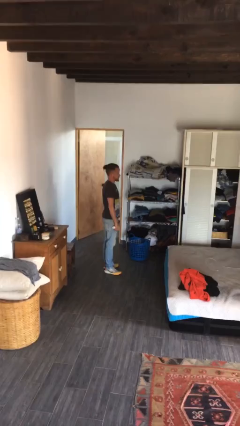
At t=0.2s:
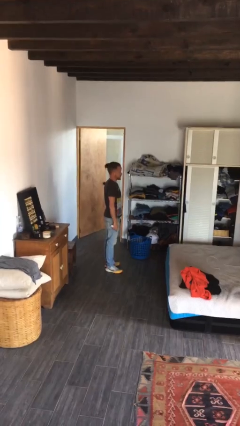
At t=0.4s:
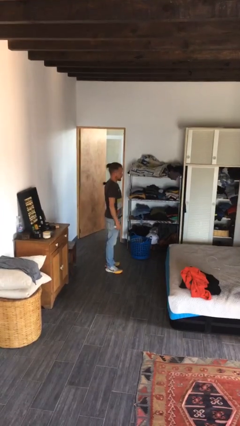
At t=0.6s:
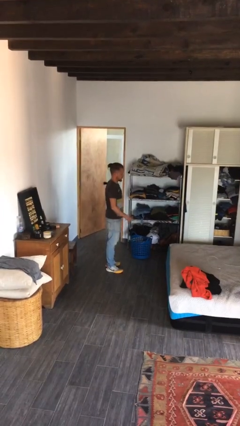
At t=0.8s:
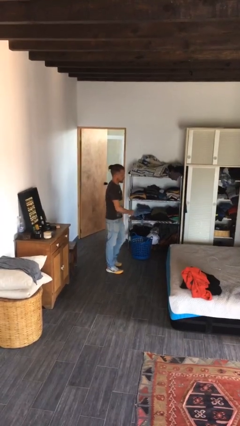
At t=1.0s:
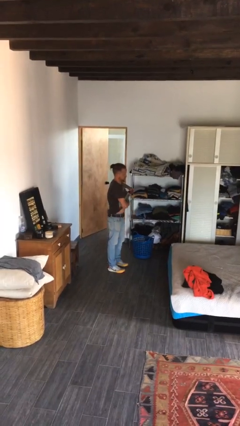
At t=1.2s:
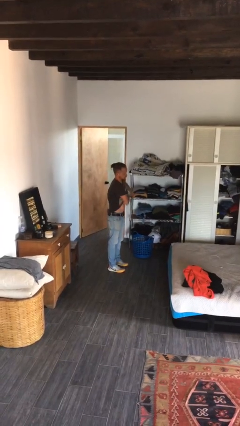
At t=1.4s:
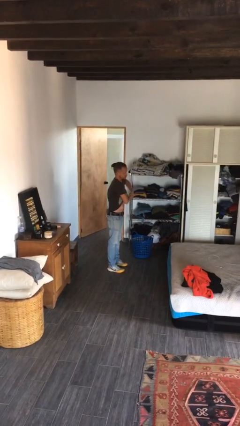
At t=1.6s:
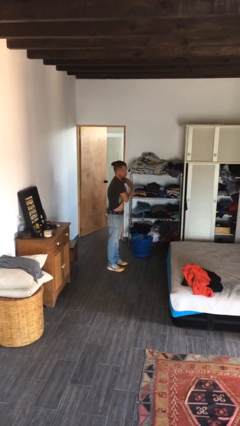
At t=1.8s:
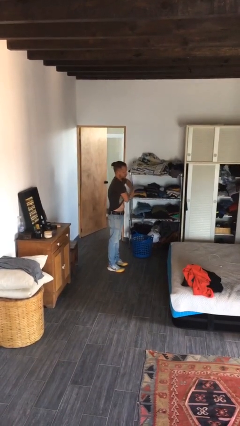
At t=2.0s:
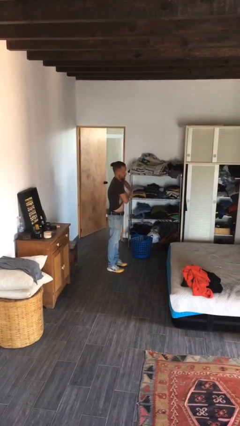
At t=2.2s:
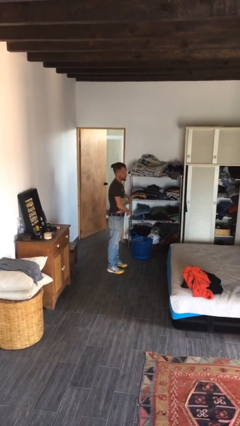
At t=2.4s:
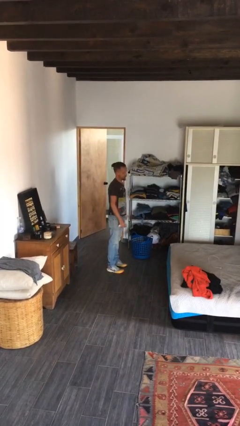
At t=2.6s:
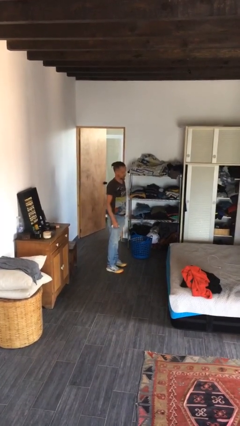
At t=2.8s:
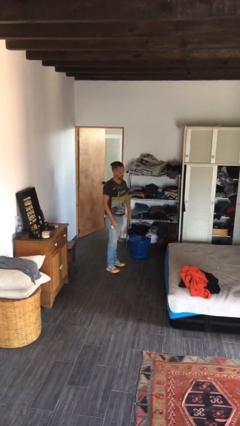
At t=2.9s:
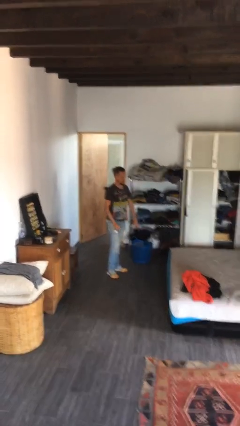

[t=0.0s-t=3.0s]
person applies deodorant

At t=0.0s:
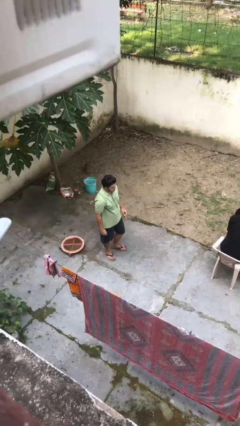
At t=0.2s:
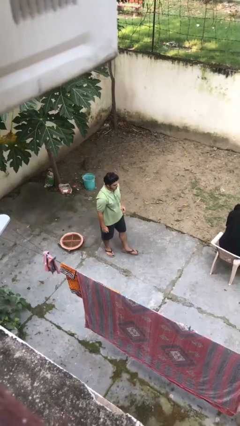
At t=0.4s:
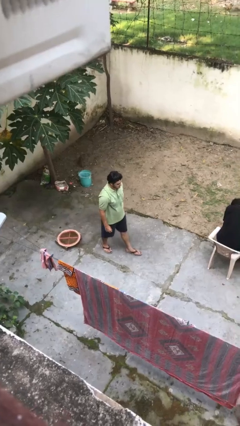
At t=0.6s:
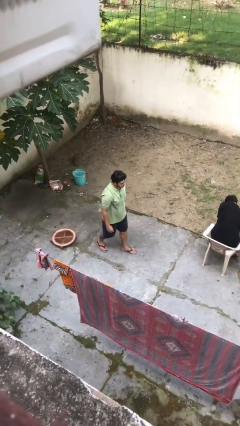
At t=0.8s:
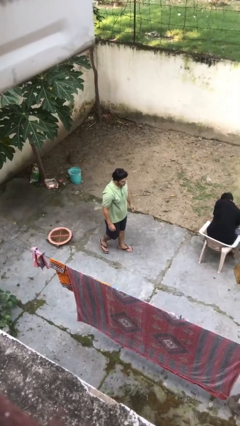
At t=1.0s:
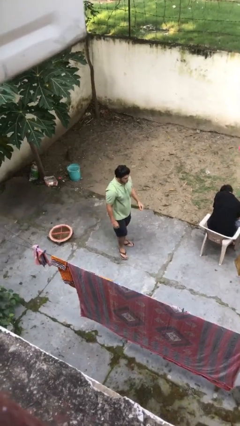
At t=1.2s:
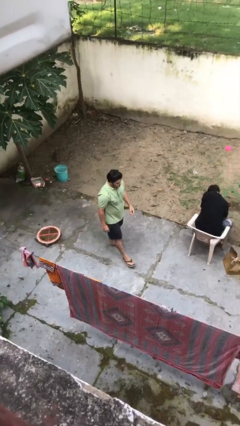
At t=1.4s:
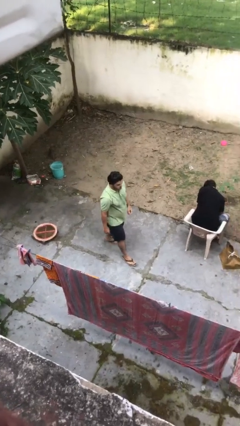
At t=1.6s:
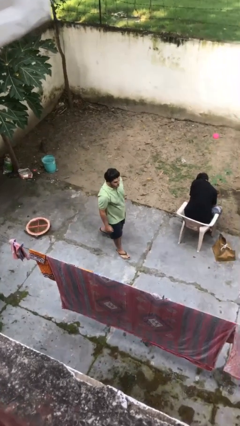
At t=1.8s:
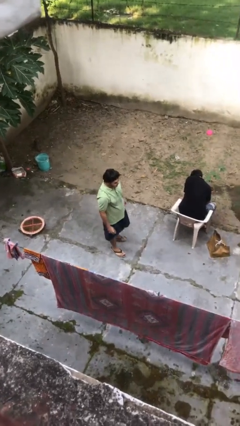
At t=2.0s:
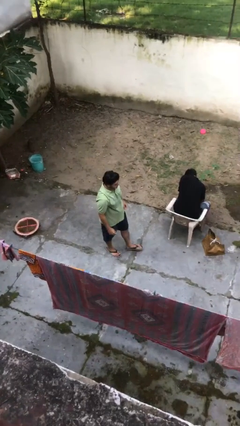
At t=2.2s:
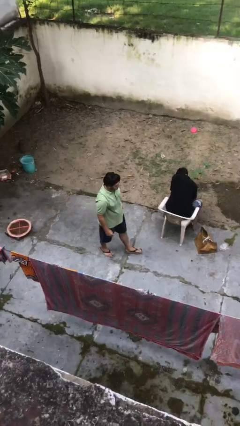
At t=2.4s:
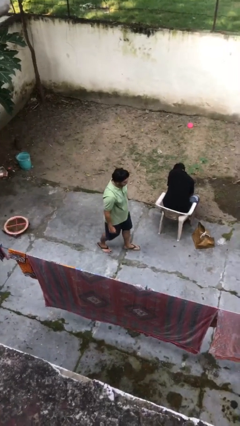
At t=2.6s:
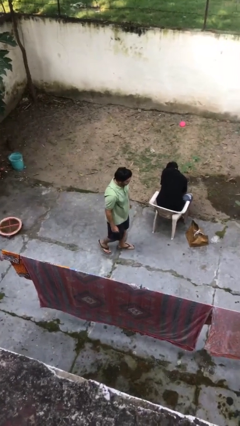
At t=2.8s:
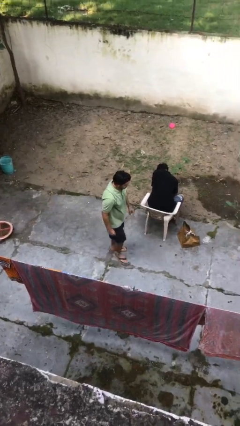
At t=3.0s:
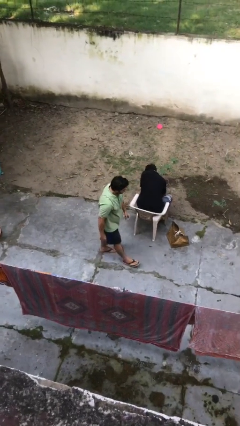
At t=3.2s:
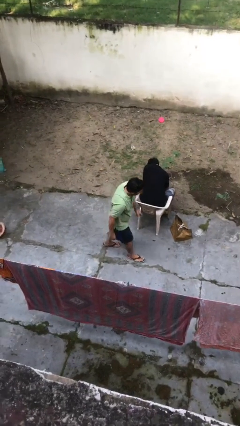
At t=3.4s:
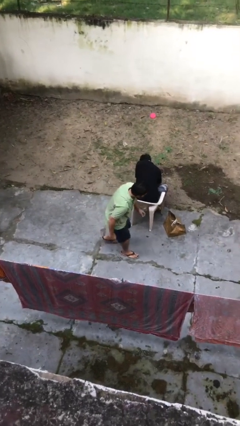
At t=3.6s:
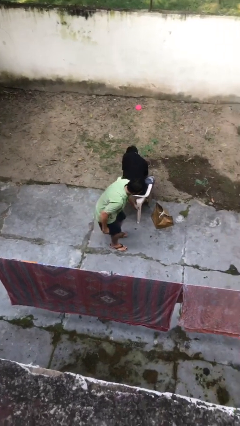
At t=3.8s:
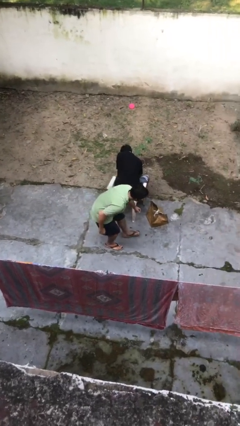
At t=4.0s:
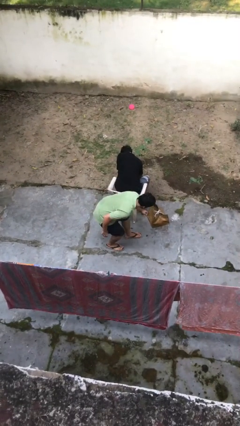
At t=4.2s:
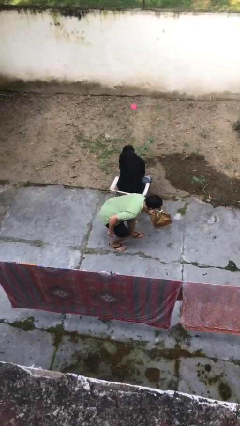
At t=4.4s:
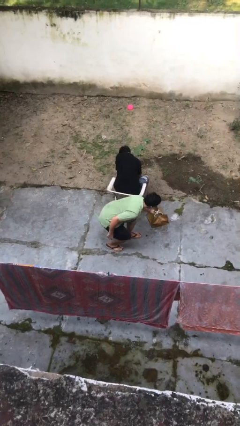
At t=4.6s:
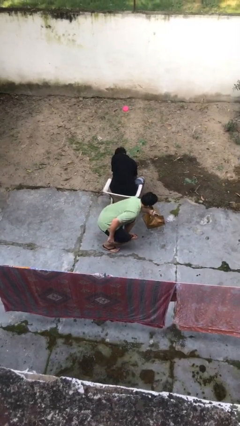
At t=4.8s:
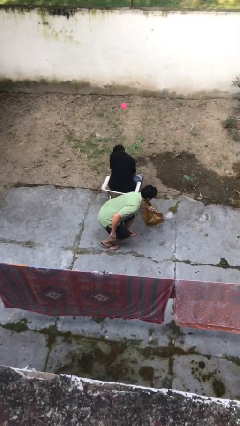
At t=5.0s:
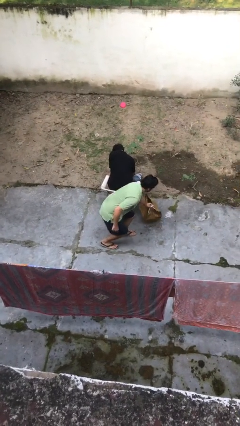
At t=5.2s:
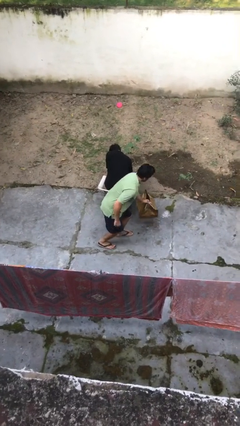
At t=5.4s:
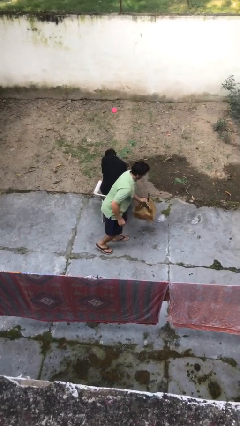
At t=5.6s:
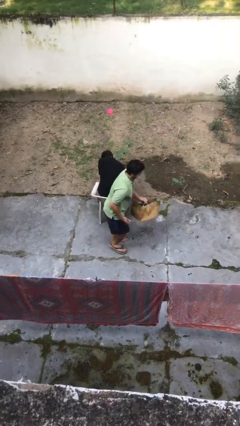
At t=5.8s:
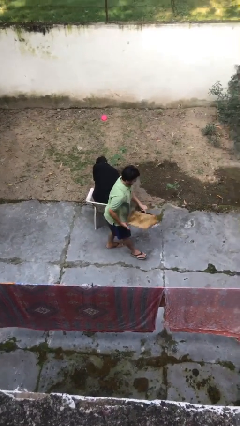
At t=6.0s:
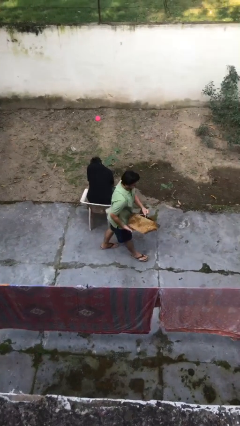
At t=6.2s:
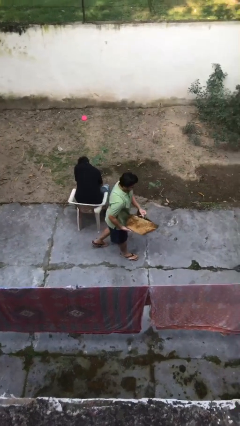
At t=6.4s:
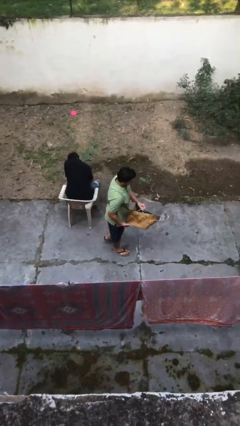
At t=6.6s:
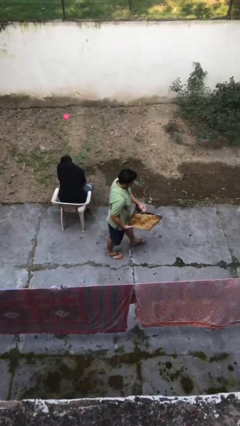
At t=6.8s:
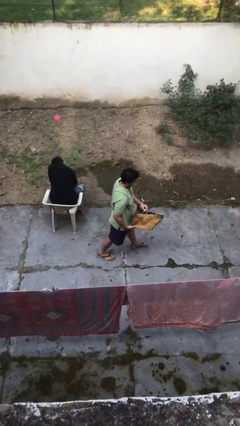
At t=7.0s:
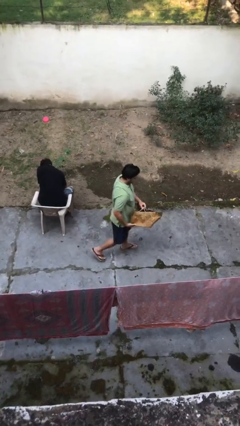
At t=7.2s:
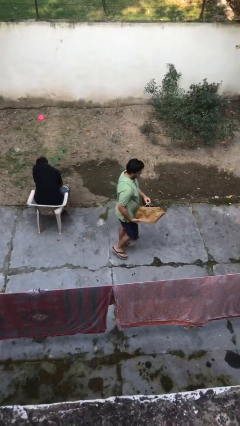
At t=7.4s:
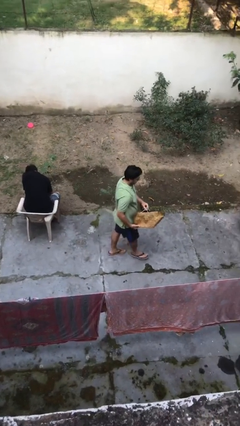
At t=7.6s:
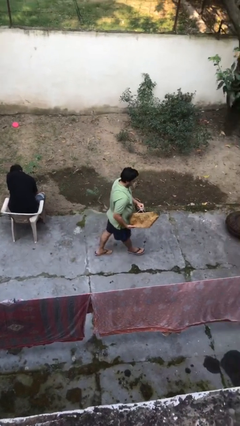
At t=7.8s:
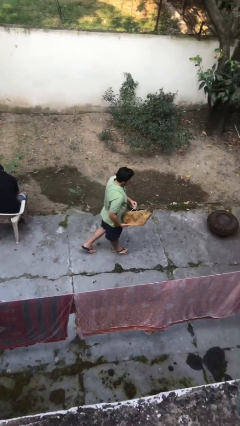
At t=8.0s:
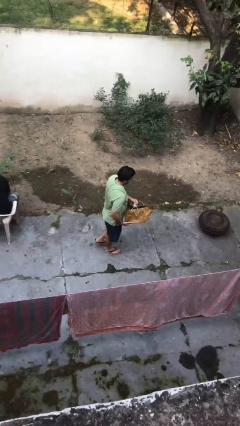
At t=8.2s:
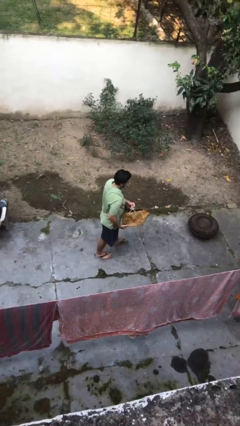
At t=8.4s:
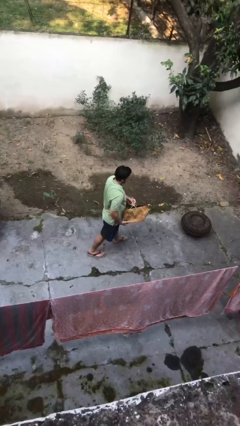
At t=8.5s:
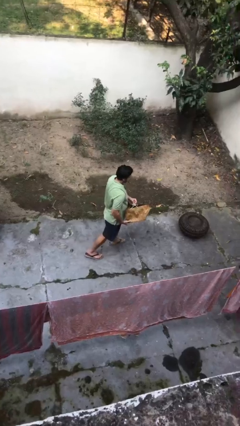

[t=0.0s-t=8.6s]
person steals object from person

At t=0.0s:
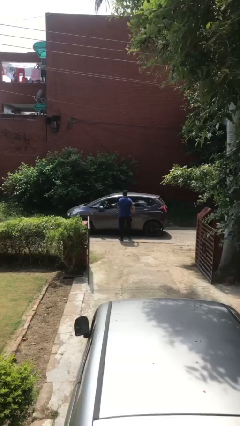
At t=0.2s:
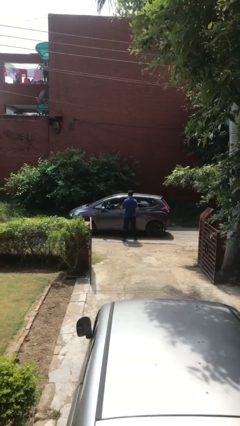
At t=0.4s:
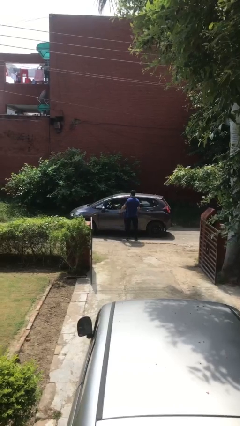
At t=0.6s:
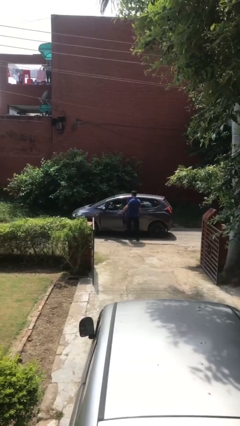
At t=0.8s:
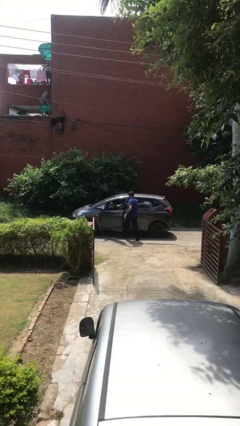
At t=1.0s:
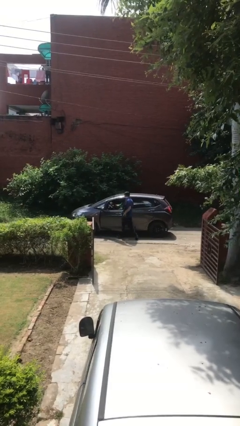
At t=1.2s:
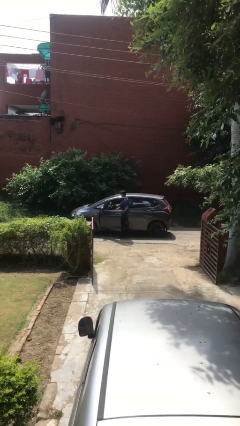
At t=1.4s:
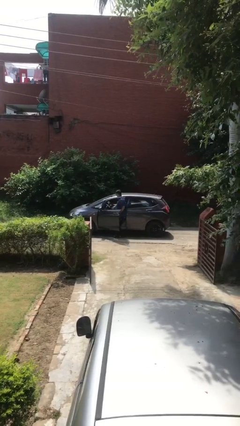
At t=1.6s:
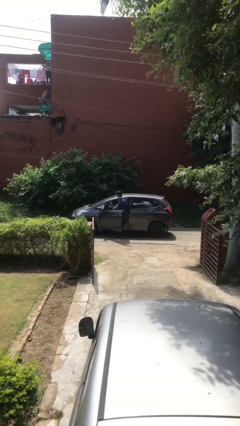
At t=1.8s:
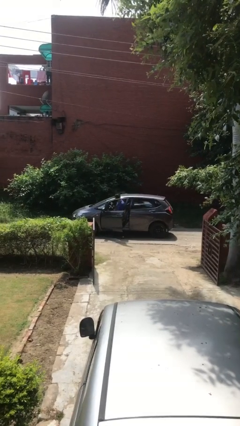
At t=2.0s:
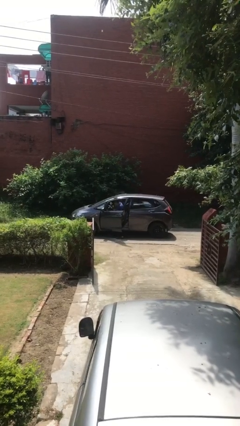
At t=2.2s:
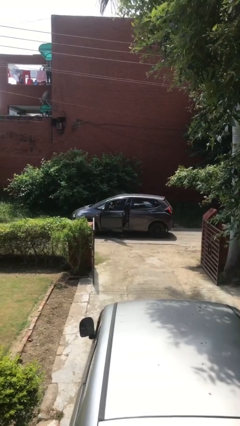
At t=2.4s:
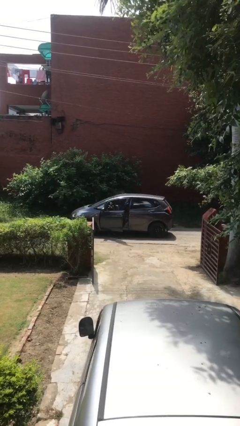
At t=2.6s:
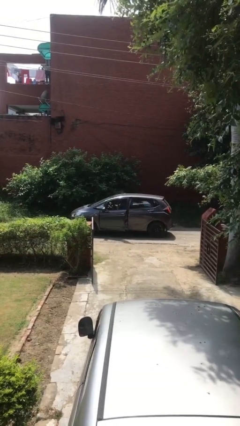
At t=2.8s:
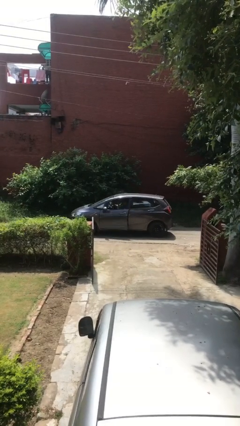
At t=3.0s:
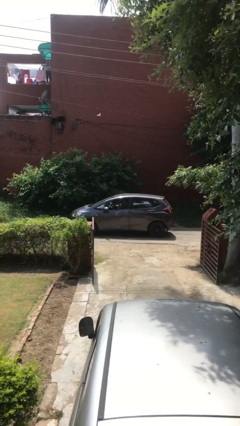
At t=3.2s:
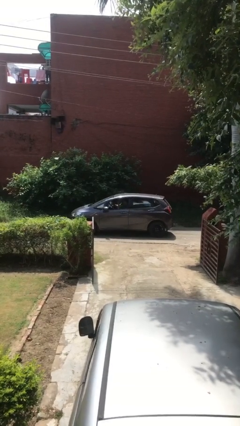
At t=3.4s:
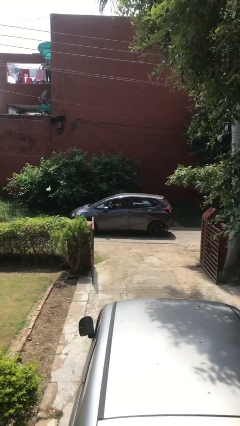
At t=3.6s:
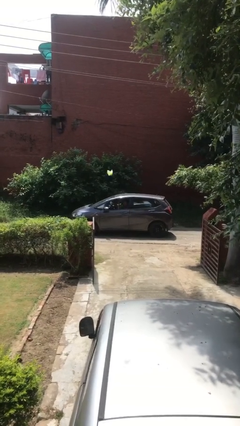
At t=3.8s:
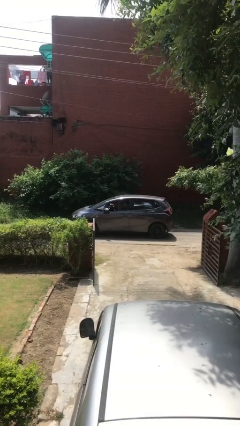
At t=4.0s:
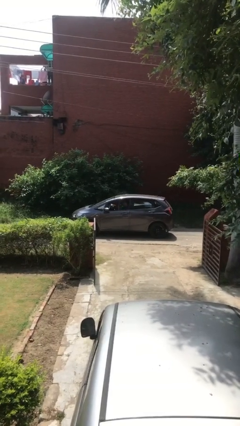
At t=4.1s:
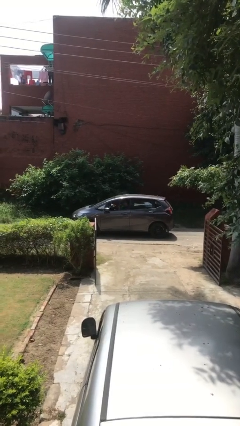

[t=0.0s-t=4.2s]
car picks up person

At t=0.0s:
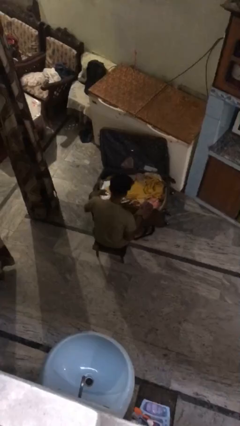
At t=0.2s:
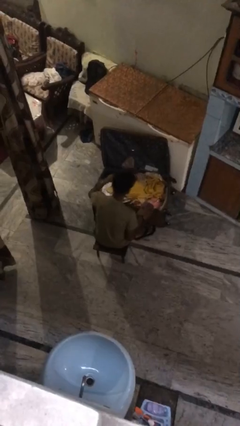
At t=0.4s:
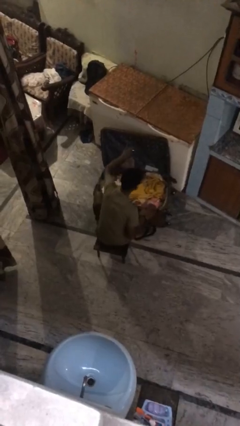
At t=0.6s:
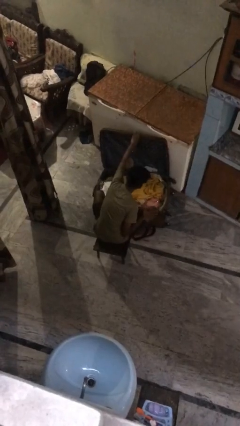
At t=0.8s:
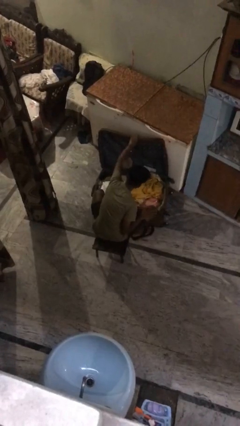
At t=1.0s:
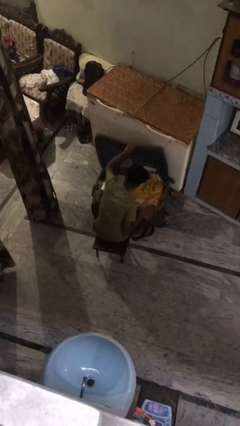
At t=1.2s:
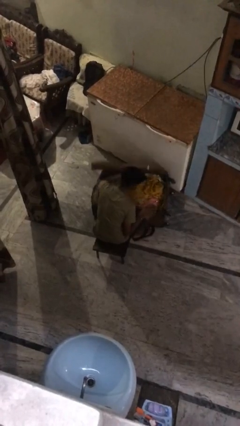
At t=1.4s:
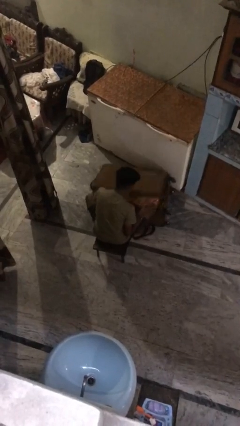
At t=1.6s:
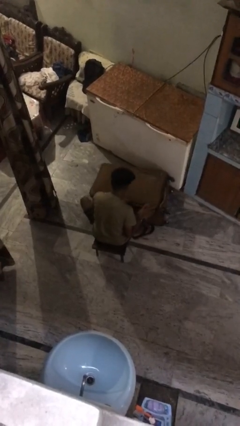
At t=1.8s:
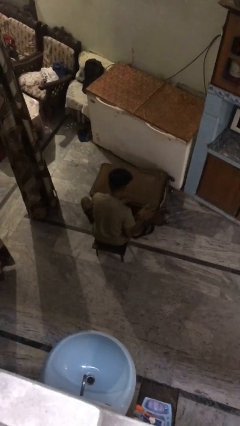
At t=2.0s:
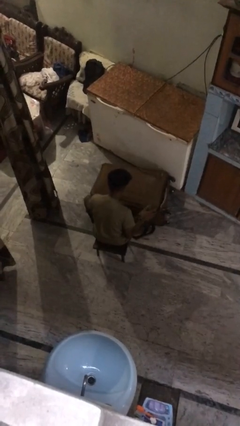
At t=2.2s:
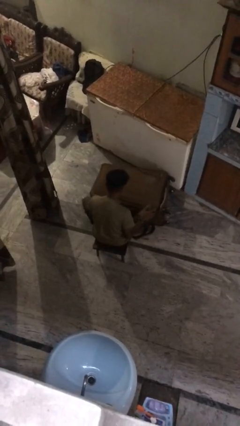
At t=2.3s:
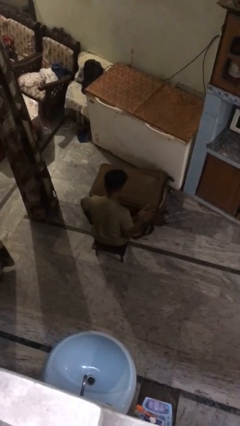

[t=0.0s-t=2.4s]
person closes suitcase
